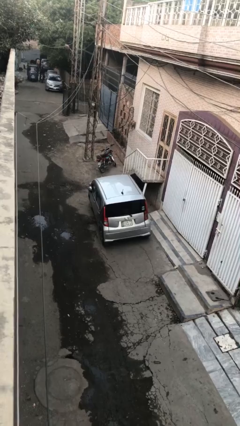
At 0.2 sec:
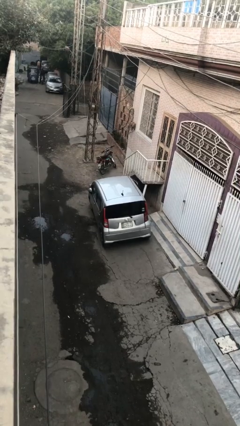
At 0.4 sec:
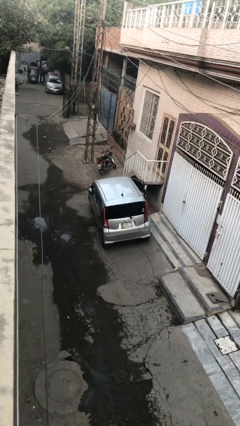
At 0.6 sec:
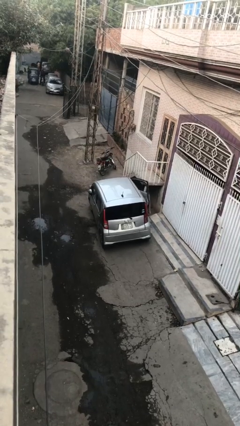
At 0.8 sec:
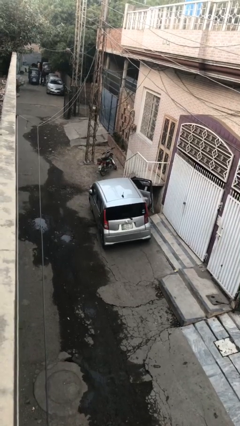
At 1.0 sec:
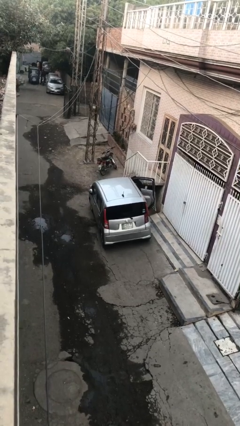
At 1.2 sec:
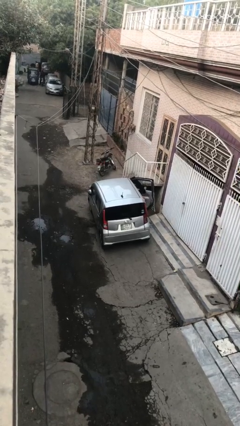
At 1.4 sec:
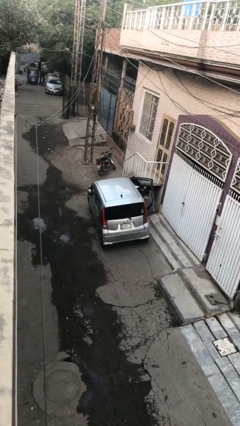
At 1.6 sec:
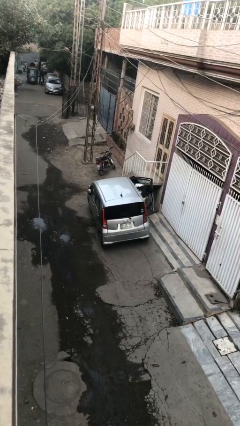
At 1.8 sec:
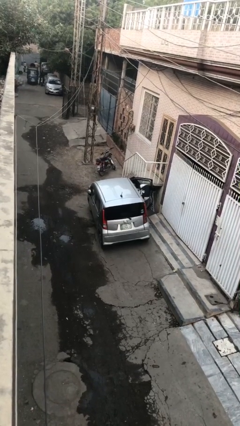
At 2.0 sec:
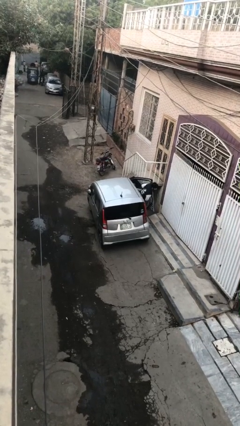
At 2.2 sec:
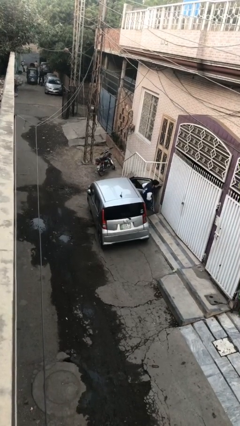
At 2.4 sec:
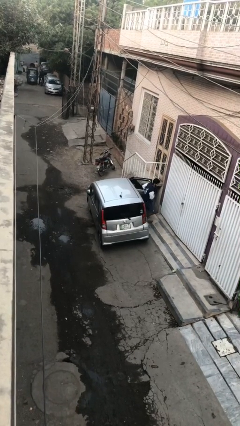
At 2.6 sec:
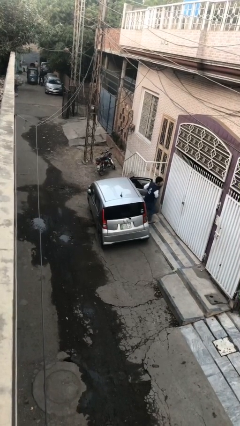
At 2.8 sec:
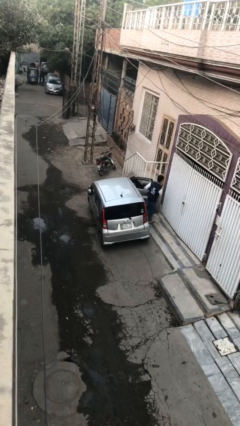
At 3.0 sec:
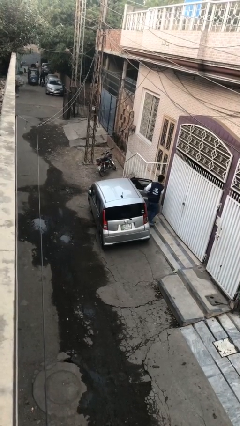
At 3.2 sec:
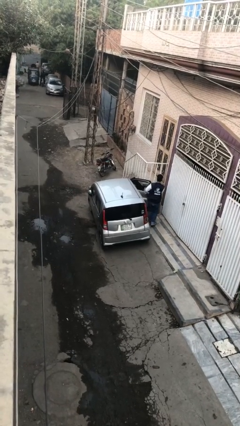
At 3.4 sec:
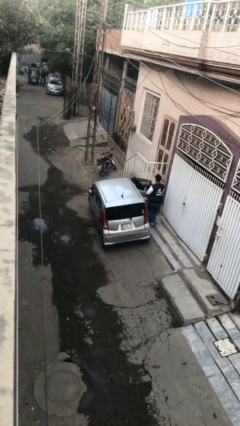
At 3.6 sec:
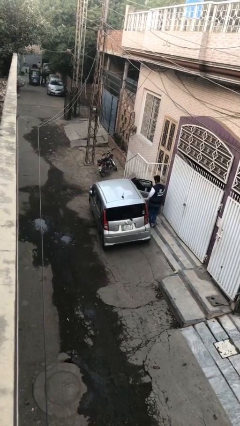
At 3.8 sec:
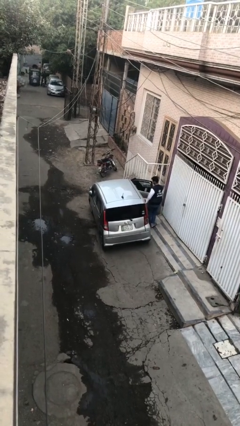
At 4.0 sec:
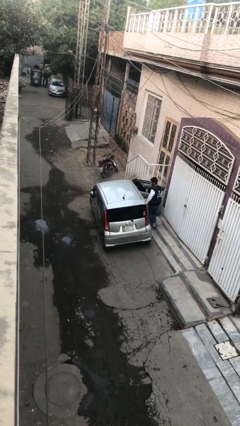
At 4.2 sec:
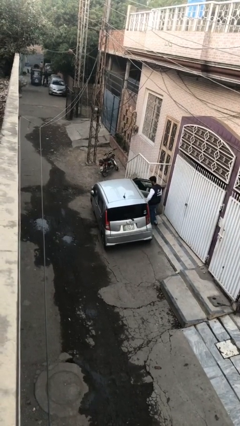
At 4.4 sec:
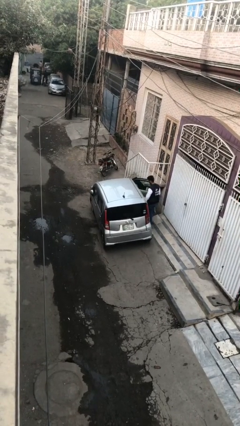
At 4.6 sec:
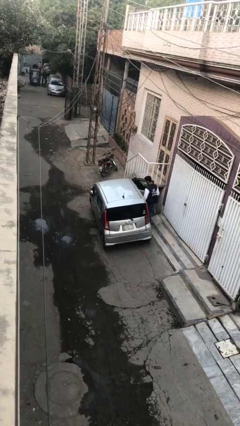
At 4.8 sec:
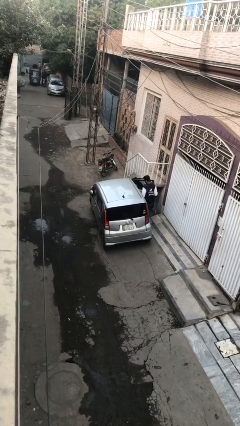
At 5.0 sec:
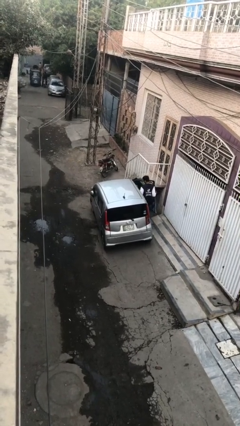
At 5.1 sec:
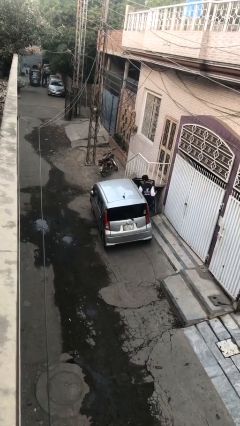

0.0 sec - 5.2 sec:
car drops off person

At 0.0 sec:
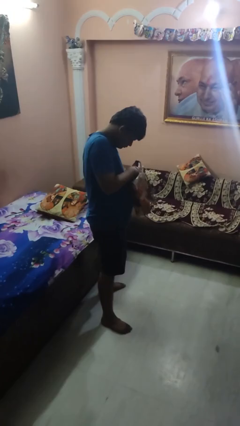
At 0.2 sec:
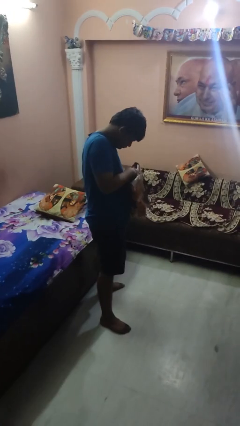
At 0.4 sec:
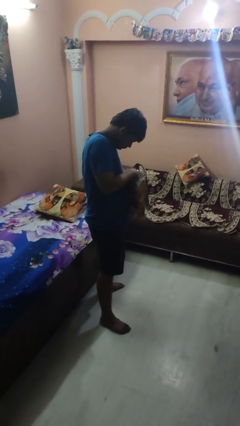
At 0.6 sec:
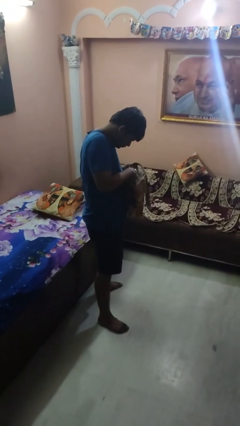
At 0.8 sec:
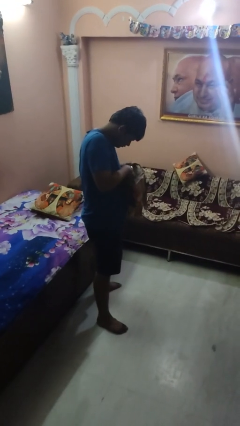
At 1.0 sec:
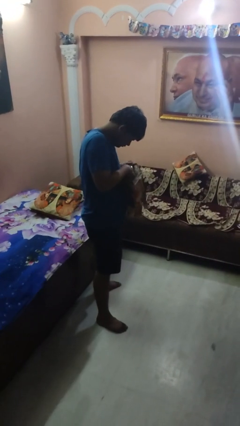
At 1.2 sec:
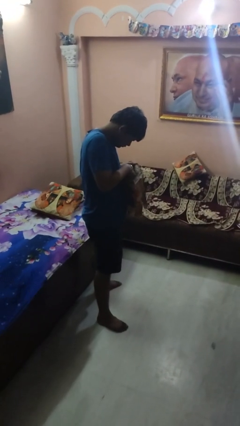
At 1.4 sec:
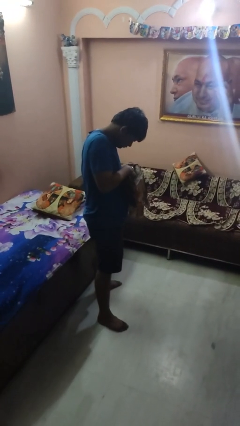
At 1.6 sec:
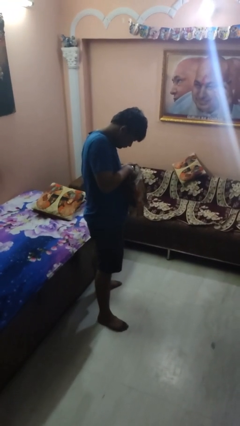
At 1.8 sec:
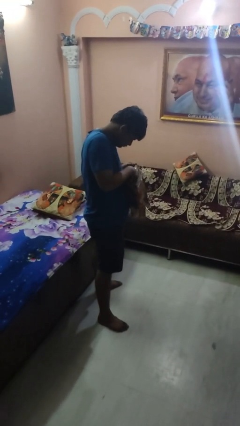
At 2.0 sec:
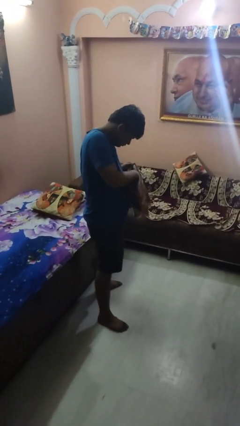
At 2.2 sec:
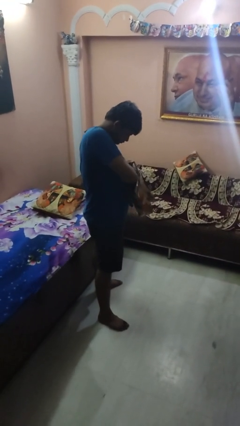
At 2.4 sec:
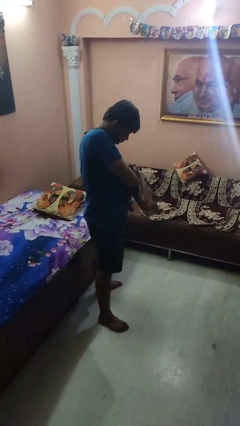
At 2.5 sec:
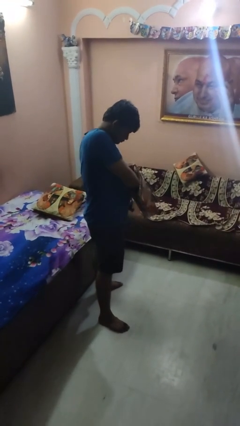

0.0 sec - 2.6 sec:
person searches in purse

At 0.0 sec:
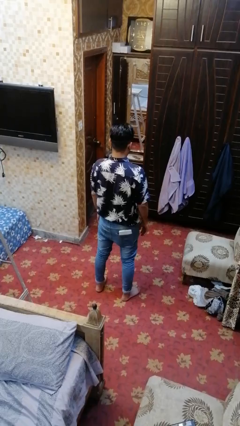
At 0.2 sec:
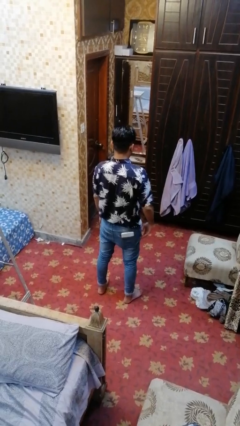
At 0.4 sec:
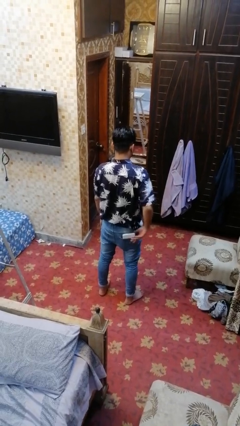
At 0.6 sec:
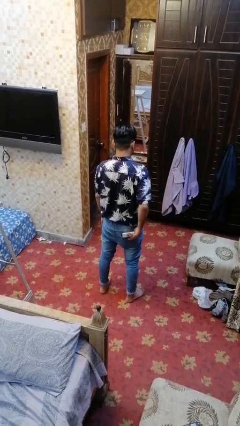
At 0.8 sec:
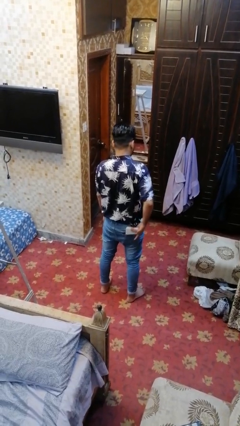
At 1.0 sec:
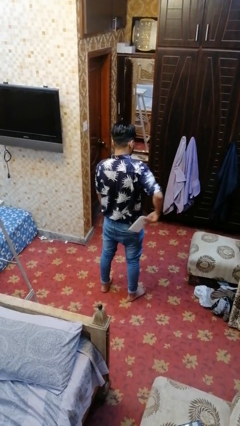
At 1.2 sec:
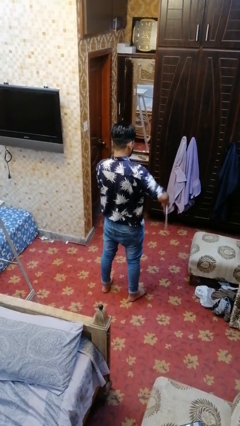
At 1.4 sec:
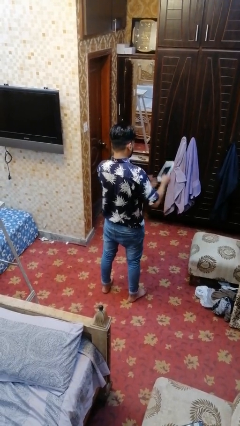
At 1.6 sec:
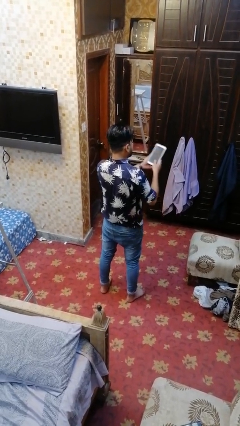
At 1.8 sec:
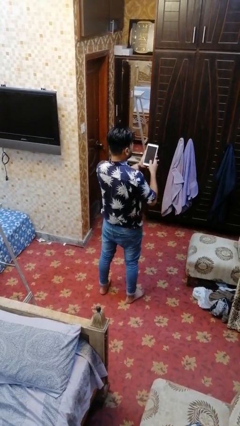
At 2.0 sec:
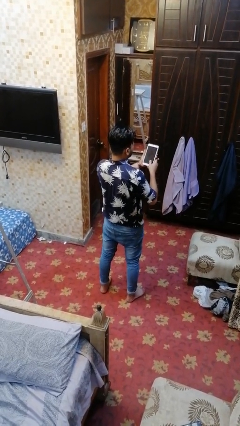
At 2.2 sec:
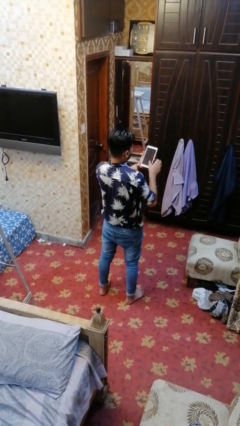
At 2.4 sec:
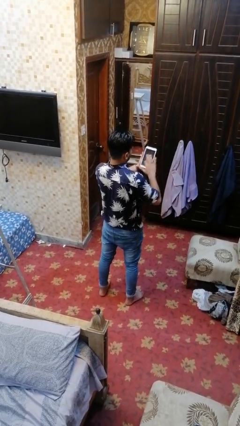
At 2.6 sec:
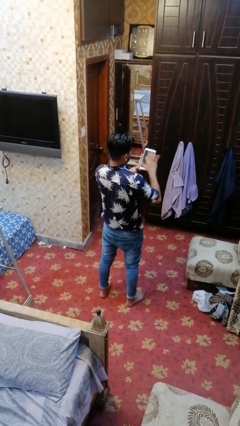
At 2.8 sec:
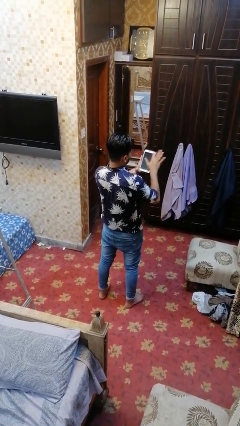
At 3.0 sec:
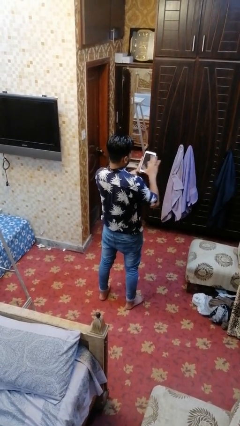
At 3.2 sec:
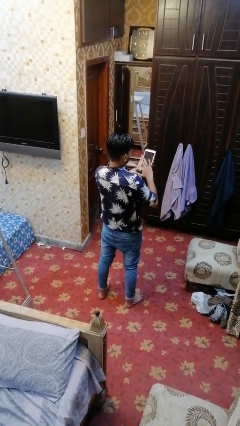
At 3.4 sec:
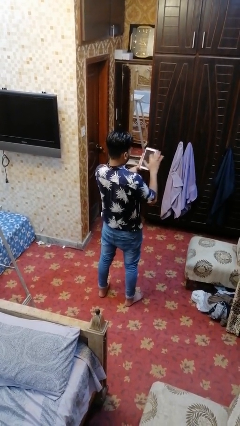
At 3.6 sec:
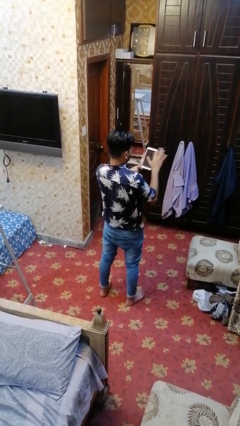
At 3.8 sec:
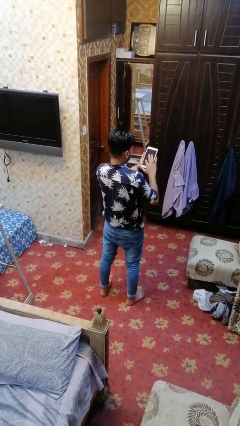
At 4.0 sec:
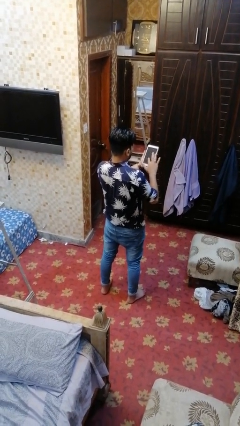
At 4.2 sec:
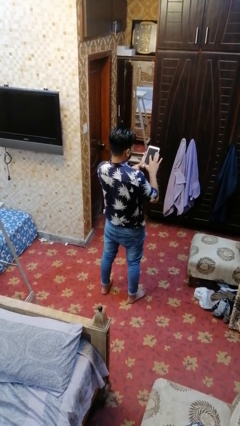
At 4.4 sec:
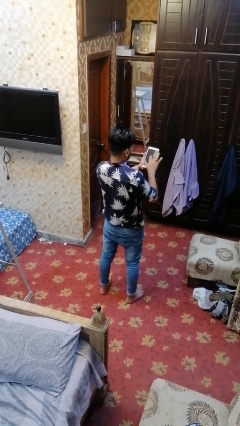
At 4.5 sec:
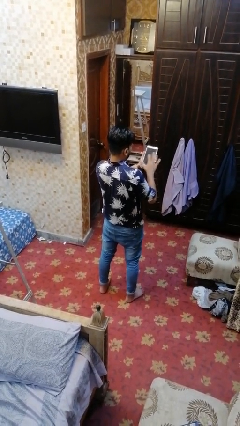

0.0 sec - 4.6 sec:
person takes phone from pocket

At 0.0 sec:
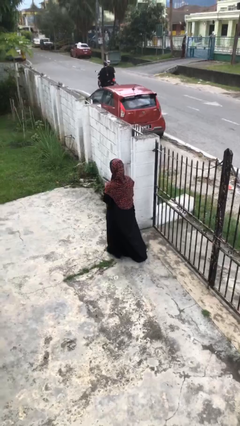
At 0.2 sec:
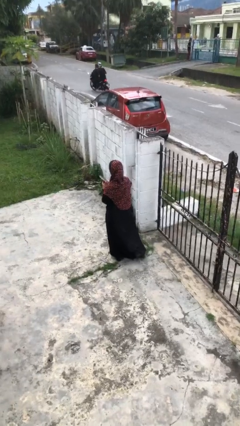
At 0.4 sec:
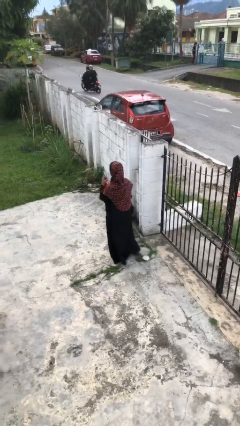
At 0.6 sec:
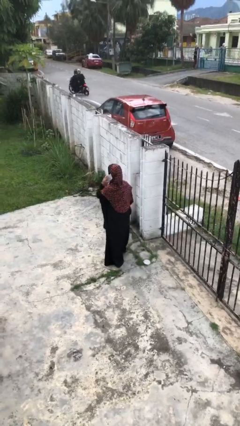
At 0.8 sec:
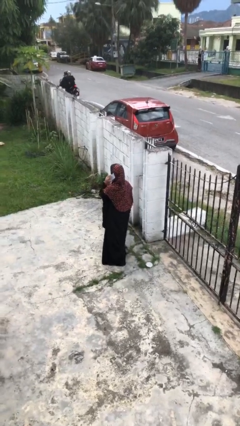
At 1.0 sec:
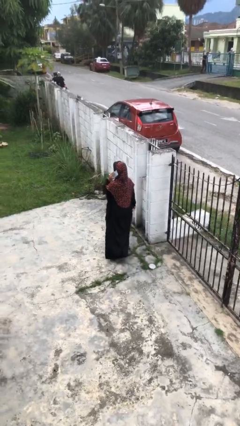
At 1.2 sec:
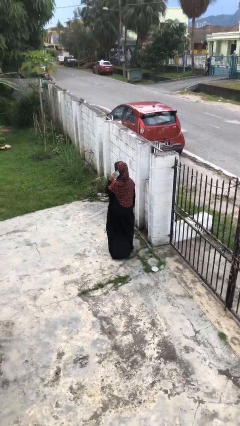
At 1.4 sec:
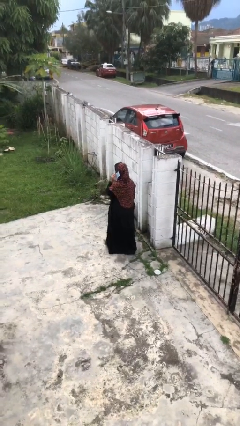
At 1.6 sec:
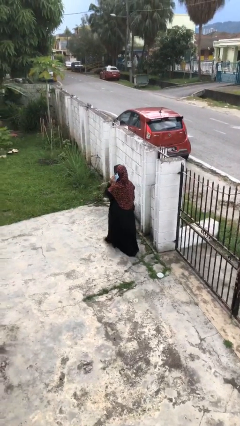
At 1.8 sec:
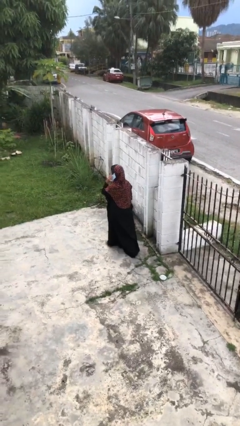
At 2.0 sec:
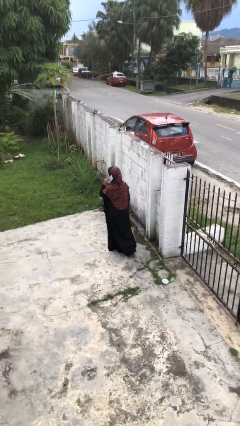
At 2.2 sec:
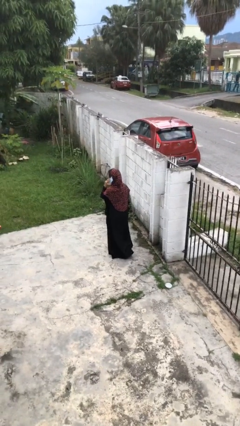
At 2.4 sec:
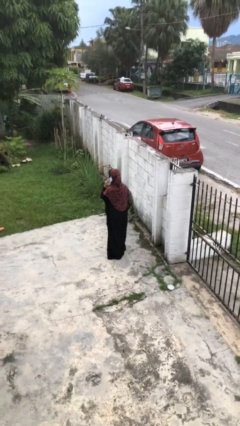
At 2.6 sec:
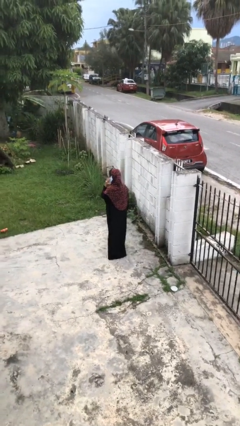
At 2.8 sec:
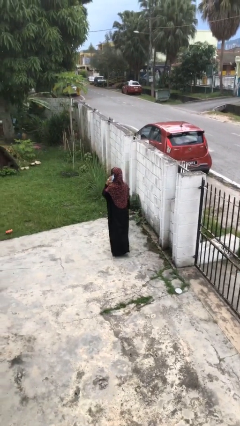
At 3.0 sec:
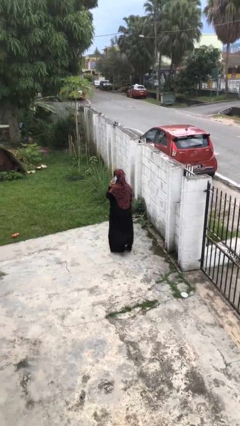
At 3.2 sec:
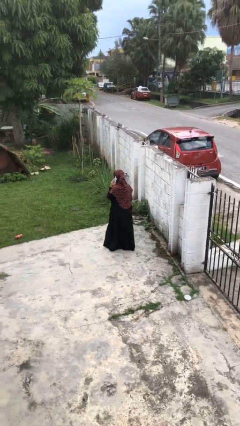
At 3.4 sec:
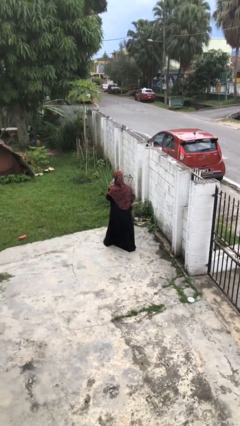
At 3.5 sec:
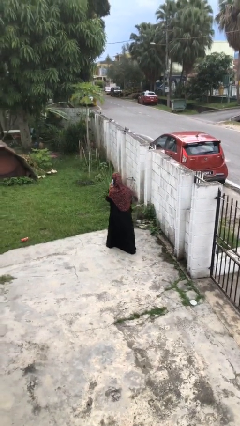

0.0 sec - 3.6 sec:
person talks on phone

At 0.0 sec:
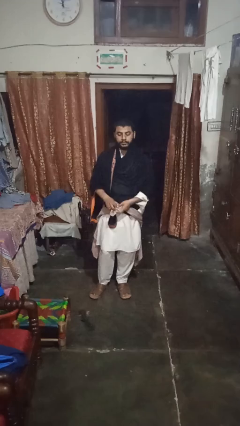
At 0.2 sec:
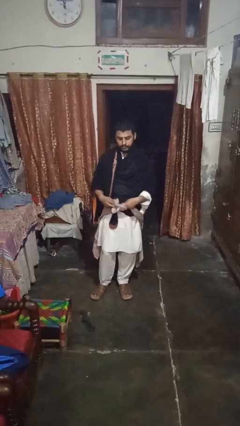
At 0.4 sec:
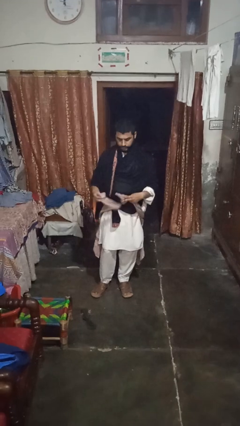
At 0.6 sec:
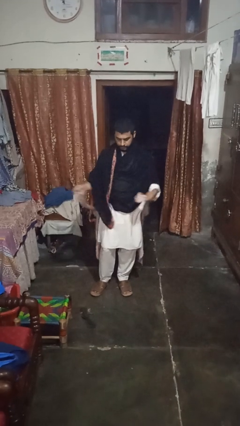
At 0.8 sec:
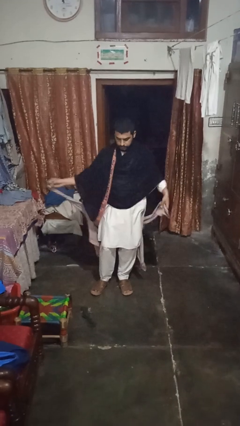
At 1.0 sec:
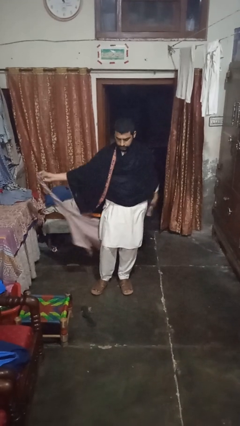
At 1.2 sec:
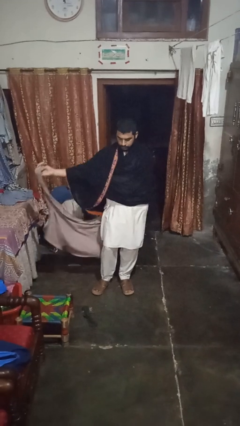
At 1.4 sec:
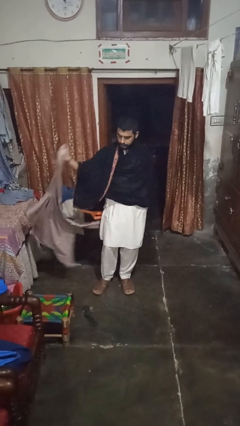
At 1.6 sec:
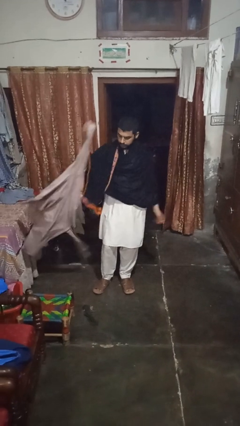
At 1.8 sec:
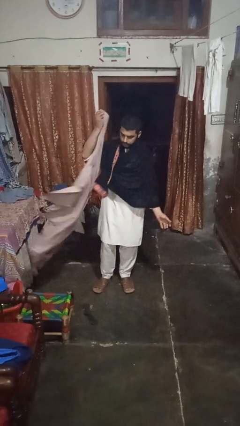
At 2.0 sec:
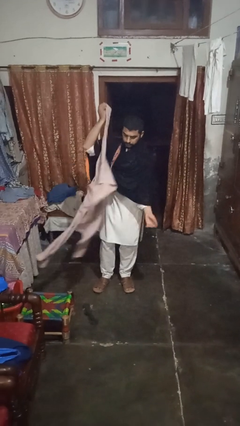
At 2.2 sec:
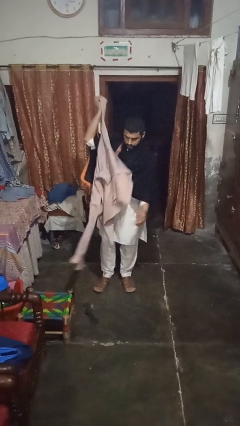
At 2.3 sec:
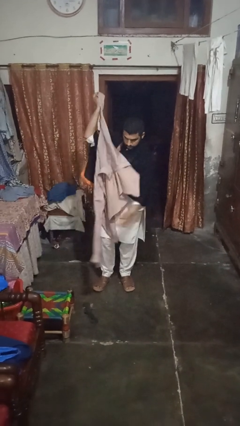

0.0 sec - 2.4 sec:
person unties jacket around waist
